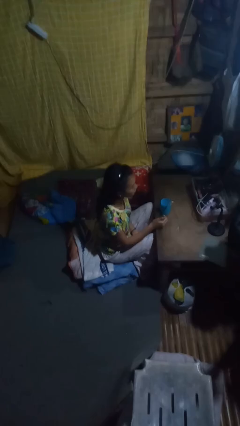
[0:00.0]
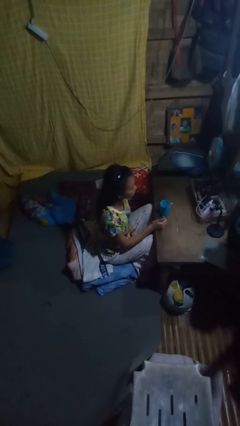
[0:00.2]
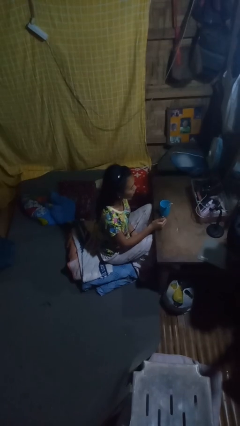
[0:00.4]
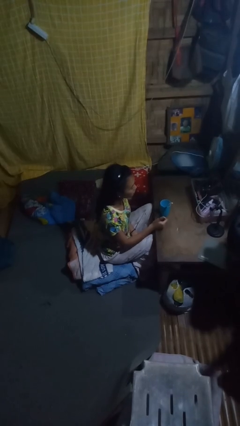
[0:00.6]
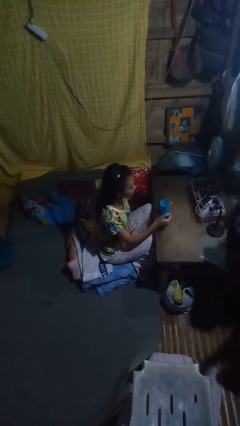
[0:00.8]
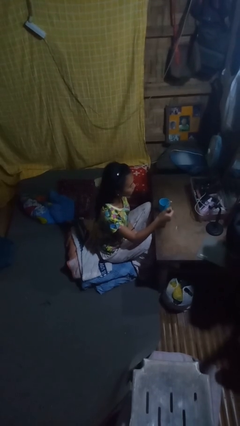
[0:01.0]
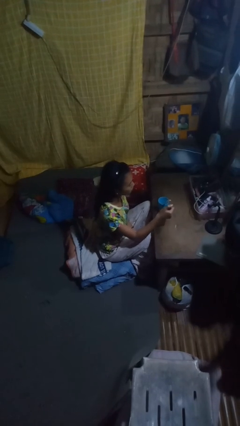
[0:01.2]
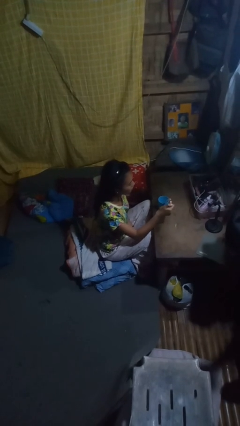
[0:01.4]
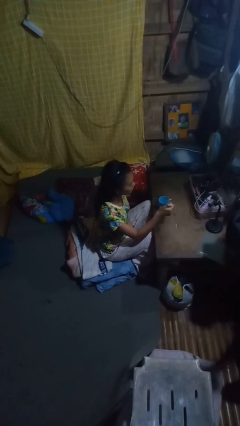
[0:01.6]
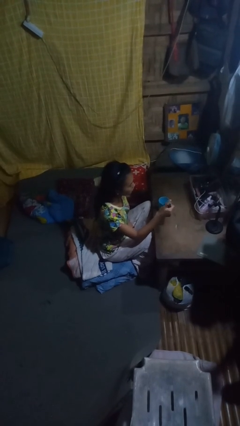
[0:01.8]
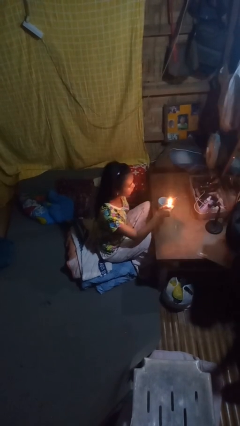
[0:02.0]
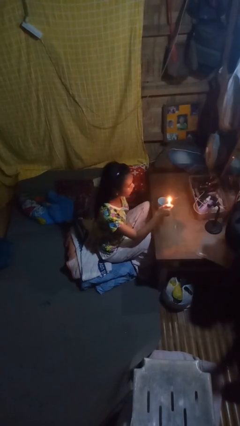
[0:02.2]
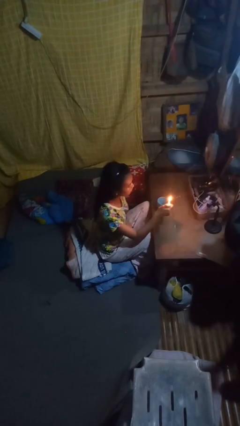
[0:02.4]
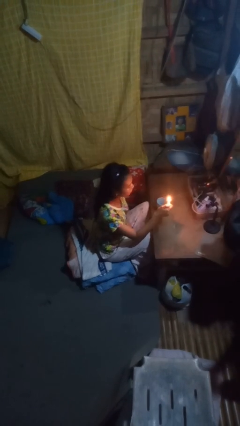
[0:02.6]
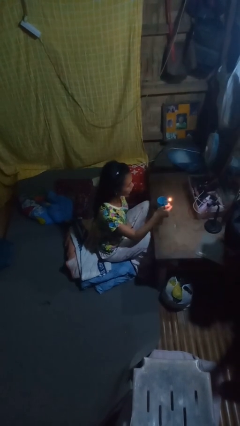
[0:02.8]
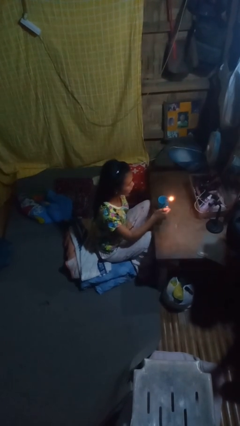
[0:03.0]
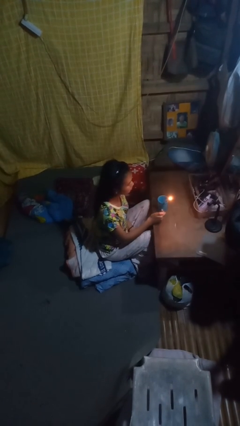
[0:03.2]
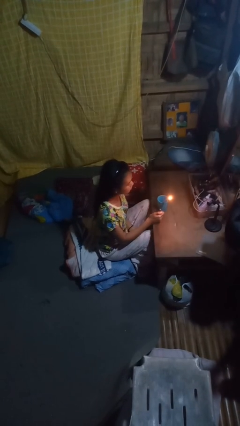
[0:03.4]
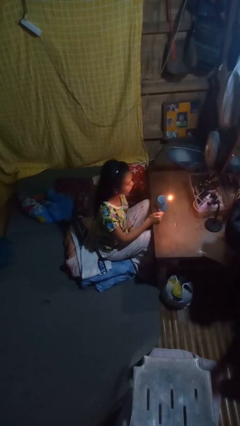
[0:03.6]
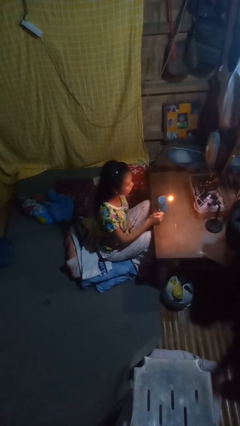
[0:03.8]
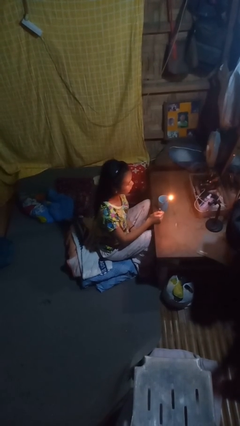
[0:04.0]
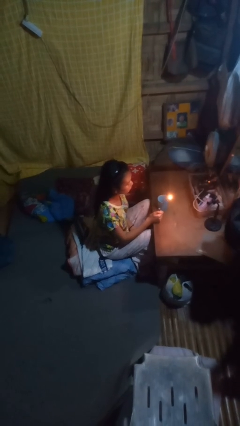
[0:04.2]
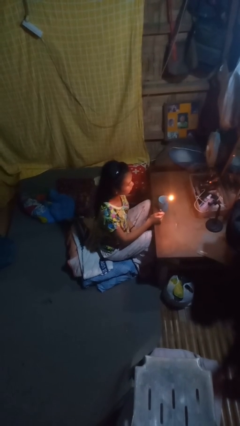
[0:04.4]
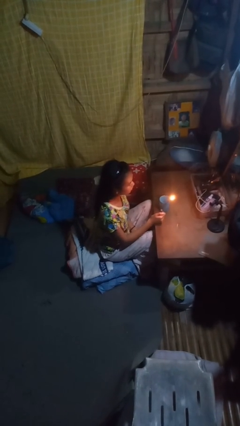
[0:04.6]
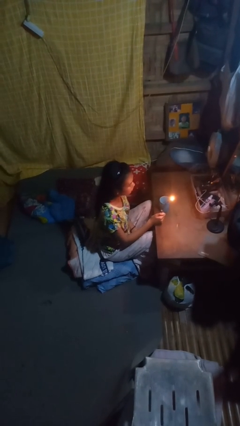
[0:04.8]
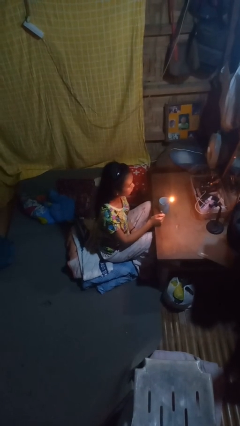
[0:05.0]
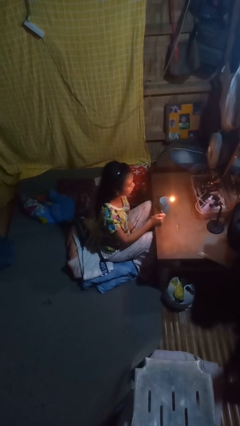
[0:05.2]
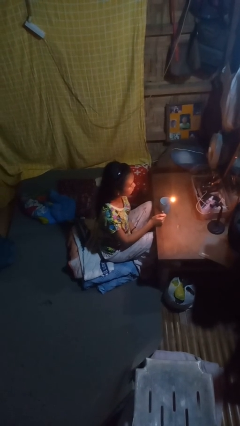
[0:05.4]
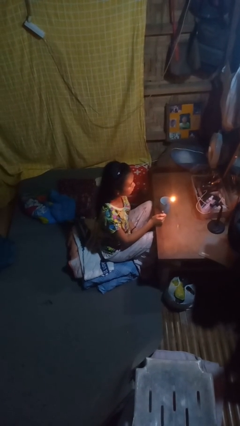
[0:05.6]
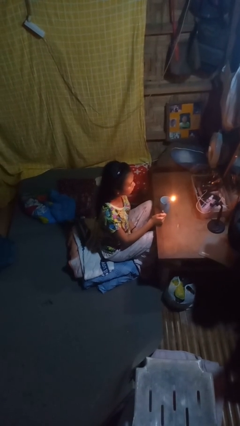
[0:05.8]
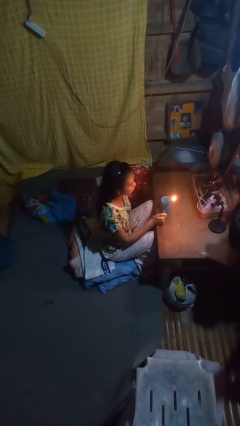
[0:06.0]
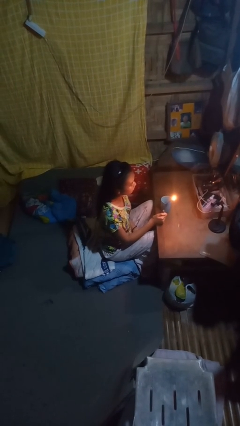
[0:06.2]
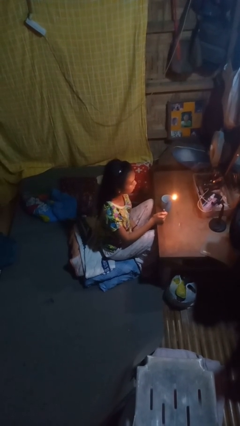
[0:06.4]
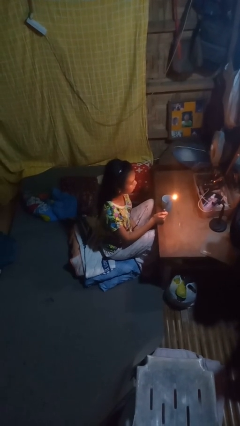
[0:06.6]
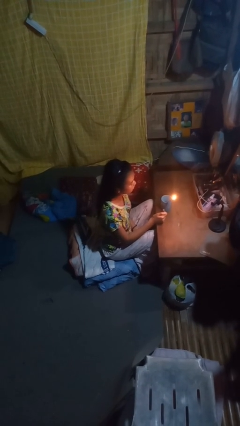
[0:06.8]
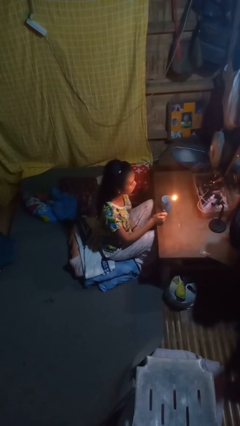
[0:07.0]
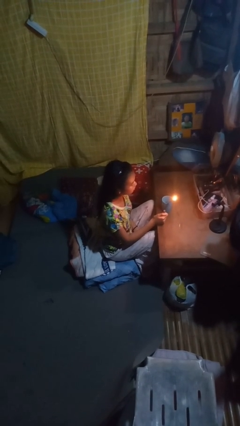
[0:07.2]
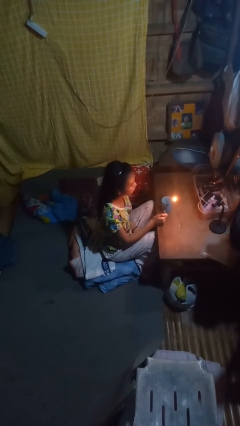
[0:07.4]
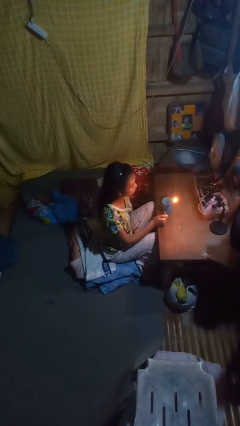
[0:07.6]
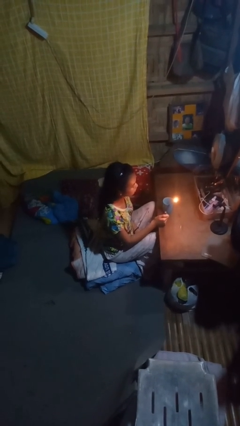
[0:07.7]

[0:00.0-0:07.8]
person lights candle

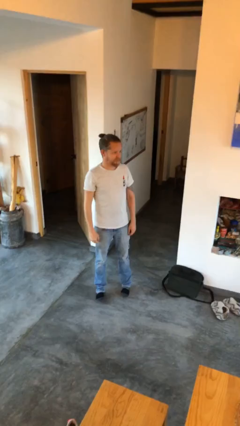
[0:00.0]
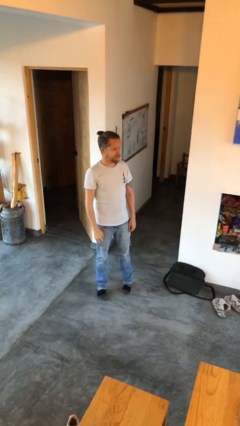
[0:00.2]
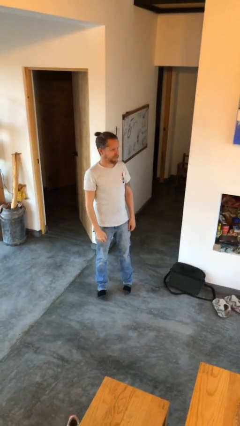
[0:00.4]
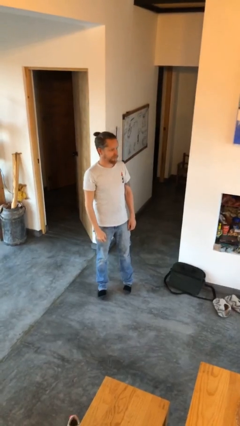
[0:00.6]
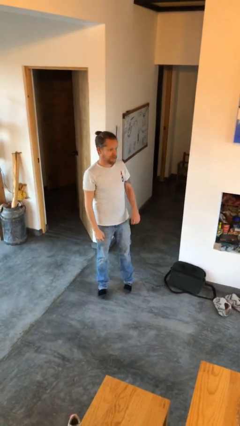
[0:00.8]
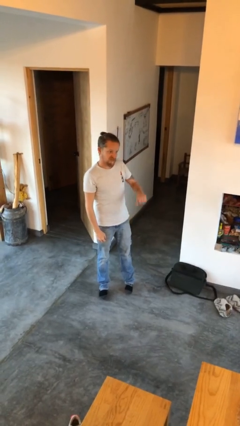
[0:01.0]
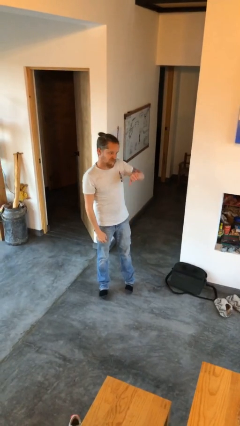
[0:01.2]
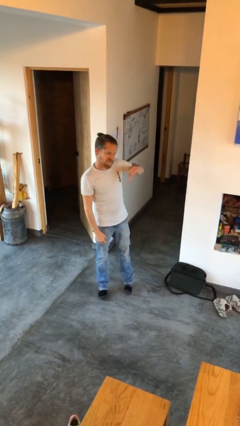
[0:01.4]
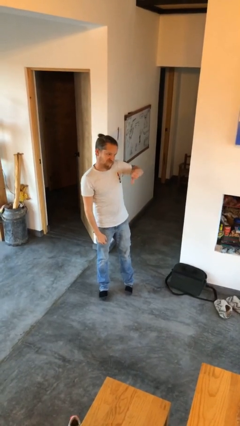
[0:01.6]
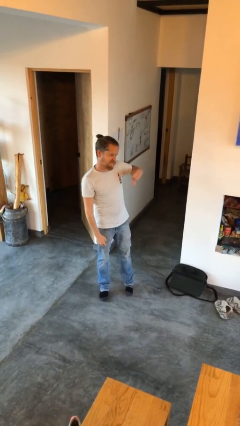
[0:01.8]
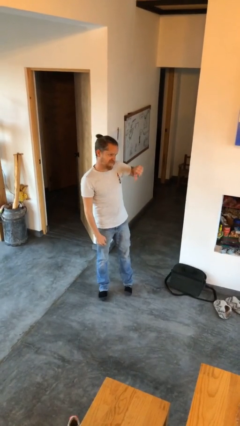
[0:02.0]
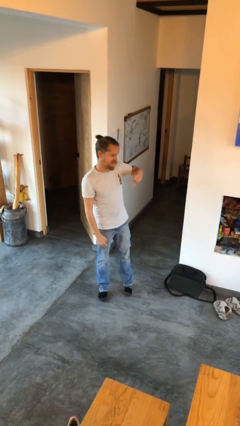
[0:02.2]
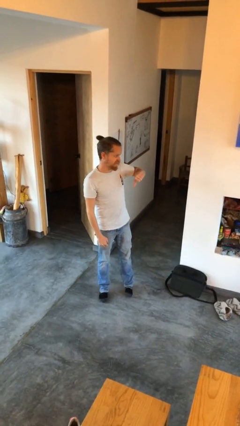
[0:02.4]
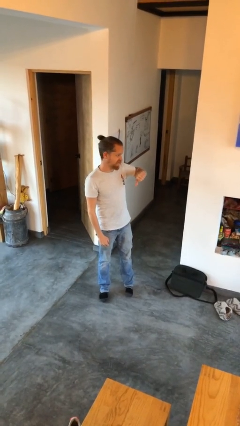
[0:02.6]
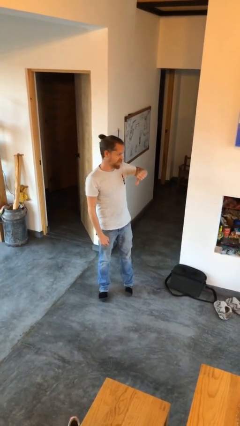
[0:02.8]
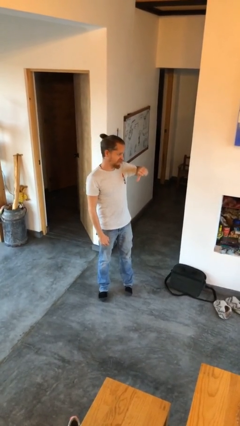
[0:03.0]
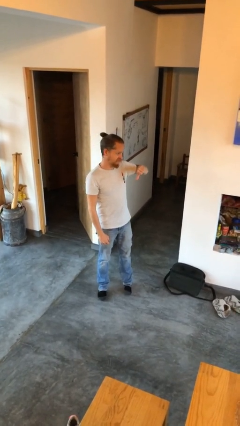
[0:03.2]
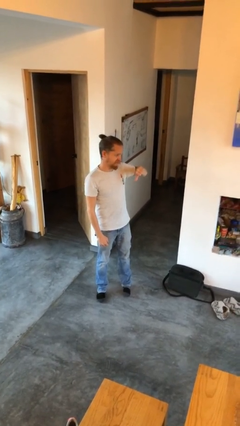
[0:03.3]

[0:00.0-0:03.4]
person gestures thumbs down

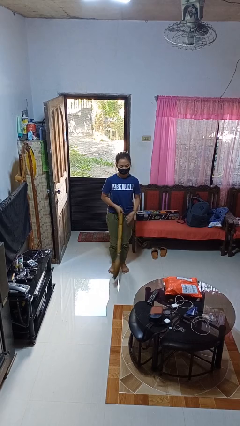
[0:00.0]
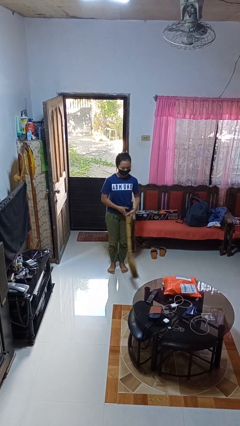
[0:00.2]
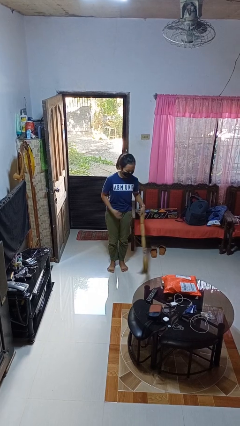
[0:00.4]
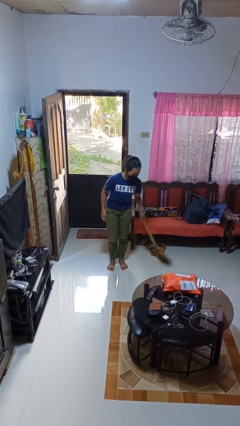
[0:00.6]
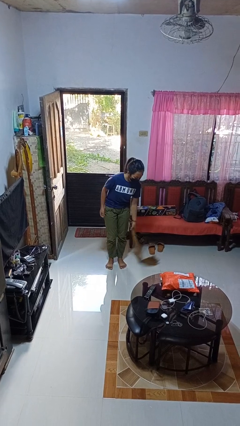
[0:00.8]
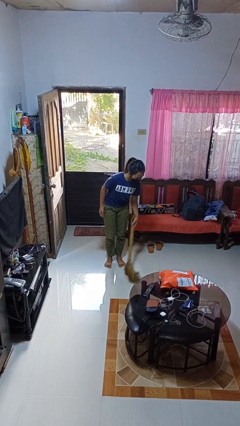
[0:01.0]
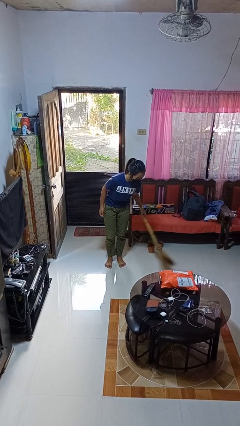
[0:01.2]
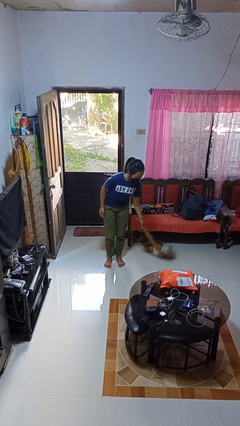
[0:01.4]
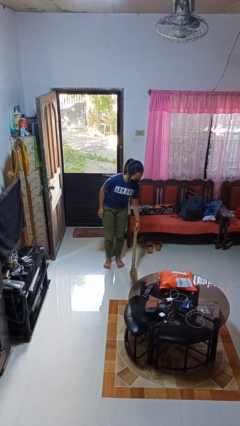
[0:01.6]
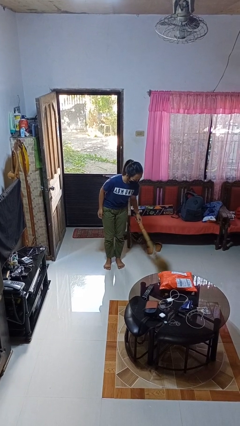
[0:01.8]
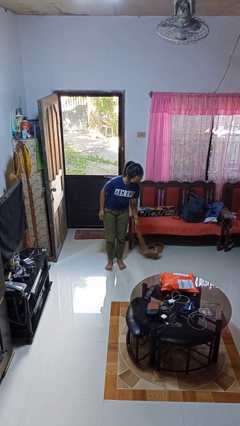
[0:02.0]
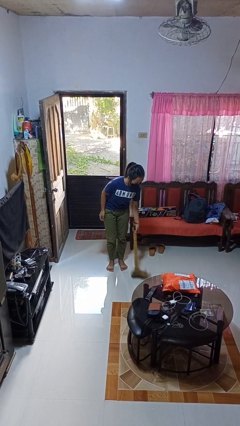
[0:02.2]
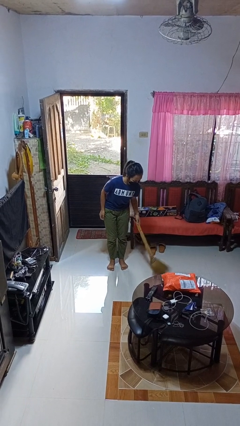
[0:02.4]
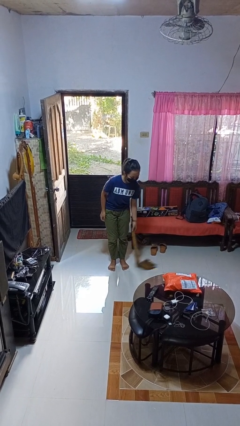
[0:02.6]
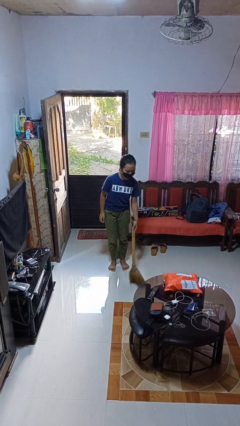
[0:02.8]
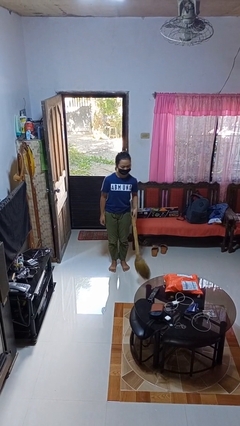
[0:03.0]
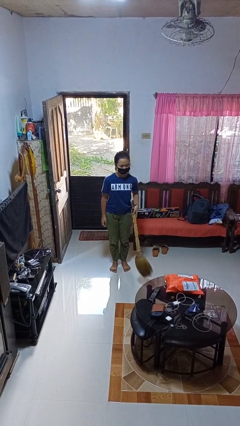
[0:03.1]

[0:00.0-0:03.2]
person sweeps floor

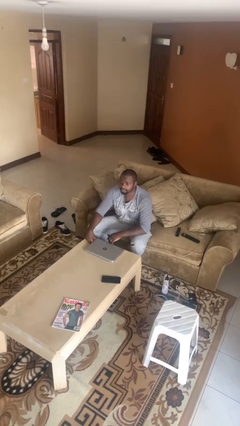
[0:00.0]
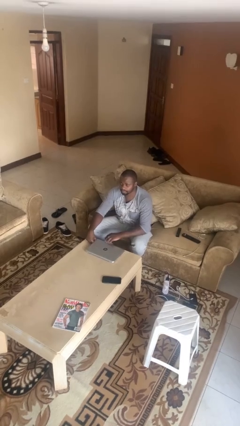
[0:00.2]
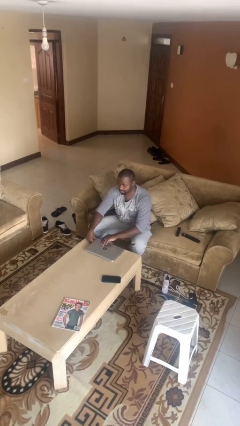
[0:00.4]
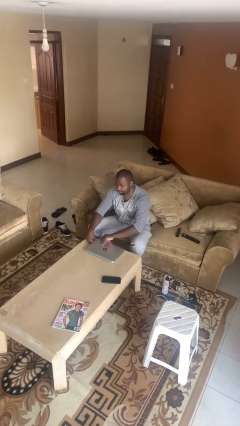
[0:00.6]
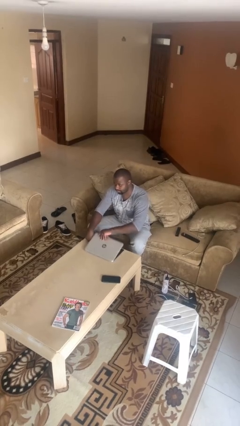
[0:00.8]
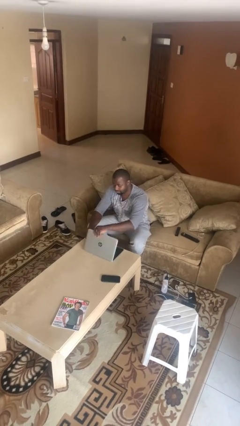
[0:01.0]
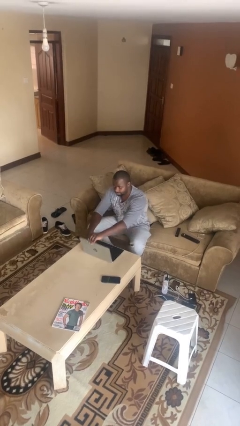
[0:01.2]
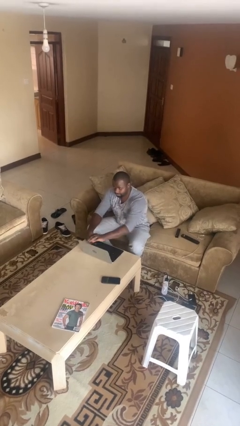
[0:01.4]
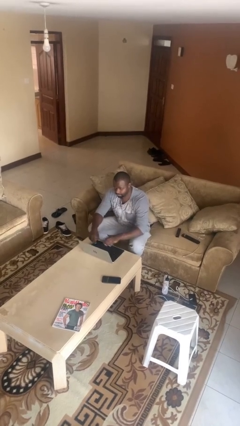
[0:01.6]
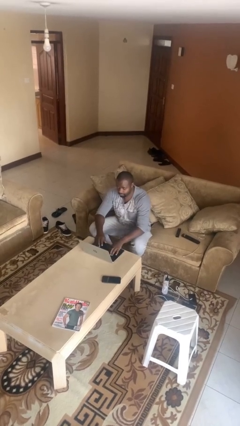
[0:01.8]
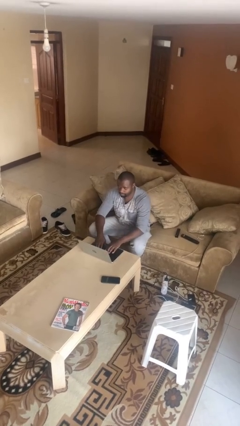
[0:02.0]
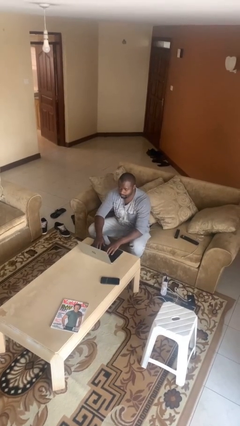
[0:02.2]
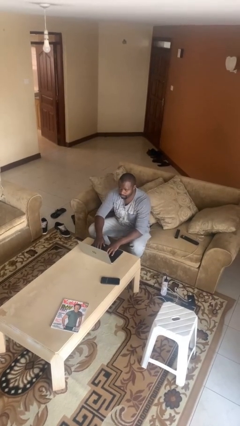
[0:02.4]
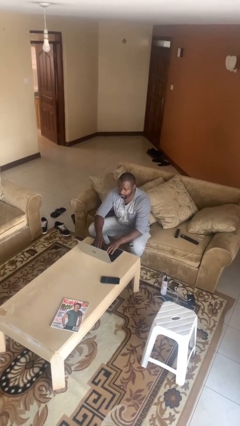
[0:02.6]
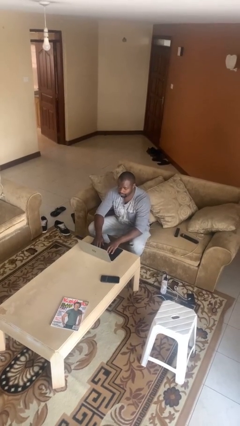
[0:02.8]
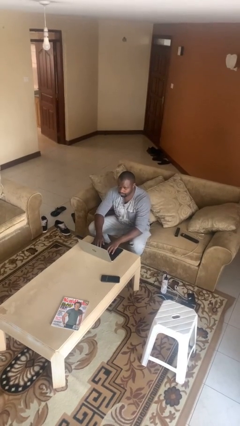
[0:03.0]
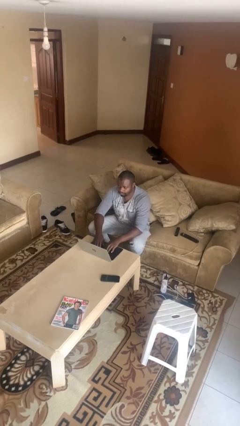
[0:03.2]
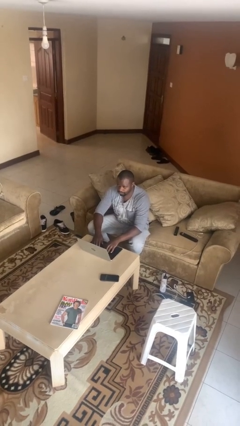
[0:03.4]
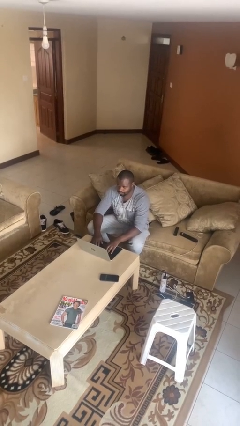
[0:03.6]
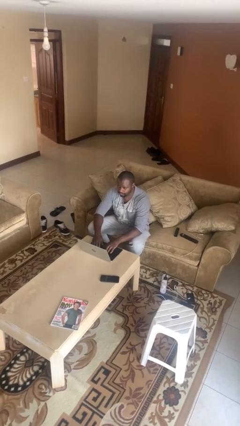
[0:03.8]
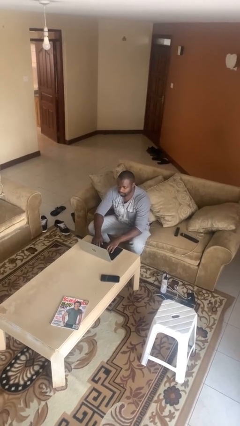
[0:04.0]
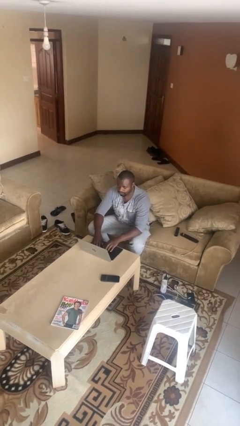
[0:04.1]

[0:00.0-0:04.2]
person interacts with laptop
